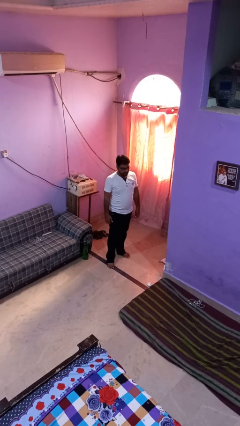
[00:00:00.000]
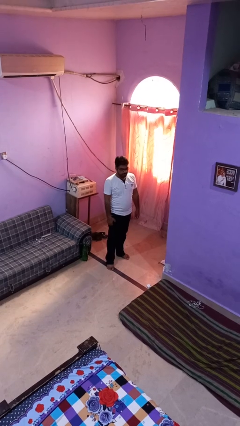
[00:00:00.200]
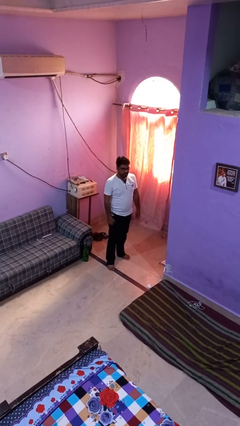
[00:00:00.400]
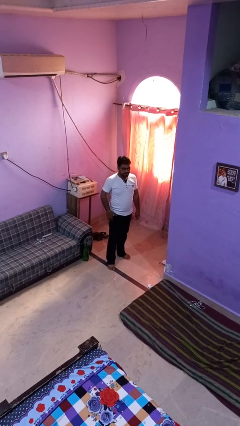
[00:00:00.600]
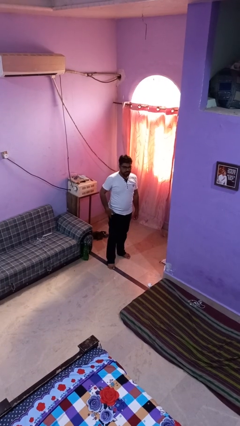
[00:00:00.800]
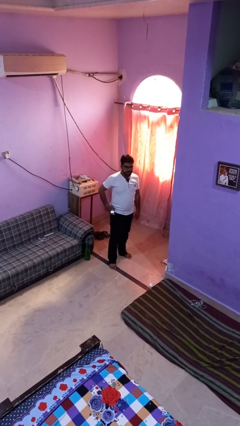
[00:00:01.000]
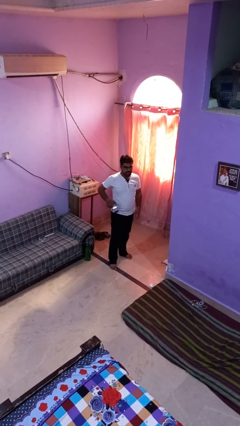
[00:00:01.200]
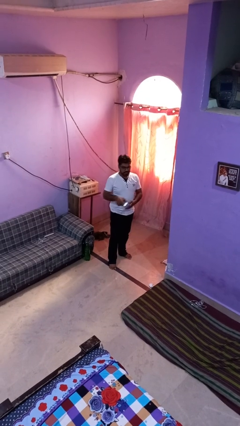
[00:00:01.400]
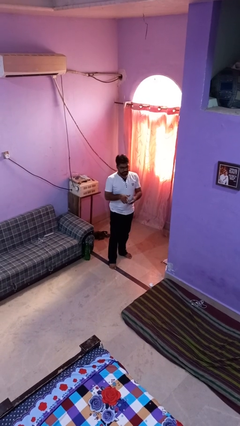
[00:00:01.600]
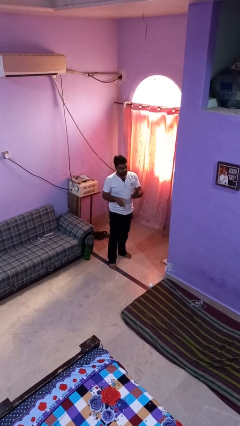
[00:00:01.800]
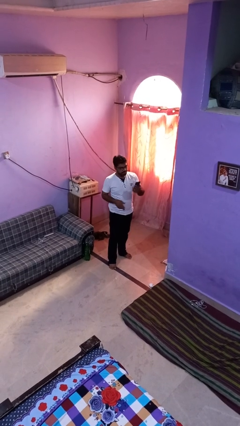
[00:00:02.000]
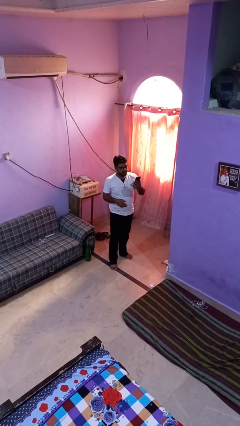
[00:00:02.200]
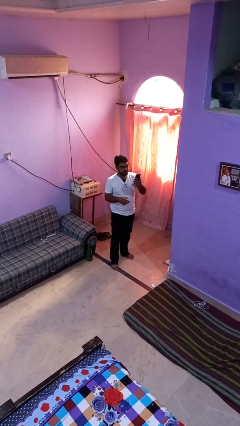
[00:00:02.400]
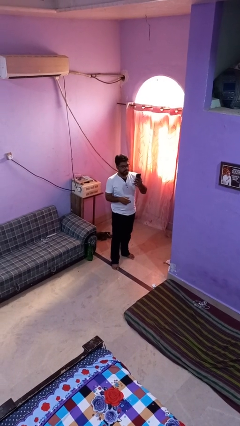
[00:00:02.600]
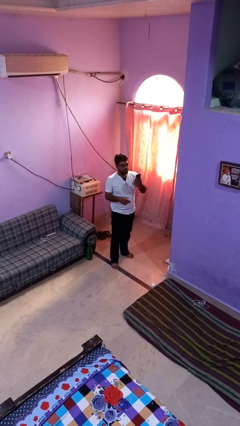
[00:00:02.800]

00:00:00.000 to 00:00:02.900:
person takes phone from pocket

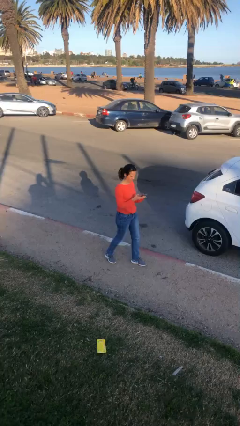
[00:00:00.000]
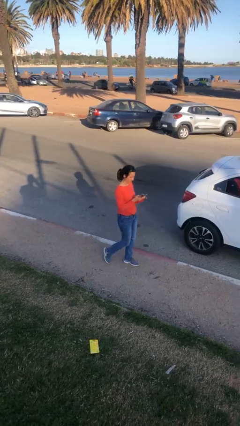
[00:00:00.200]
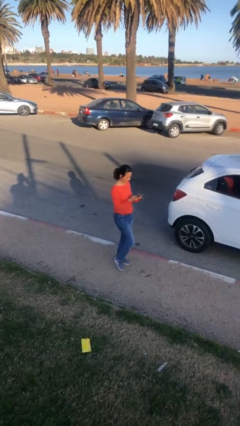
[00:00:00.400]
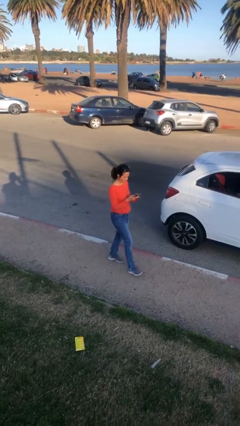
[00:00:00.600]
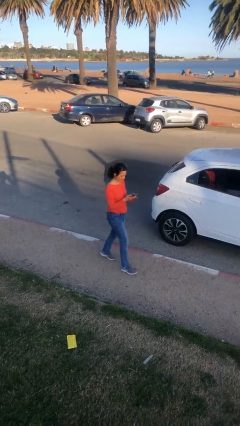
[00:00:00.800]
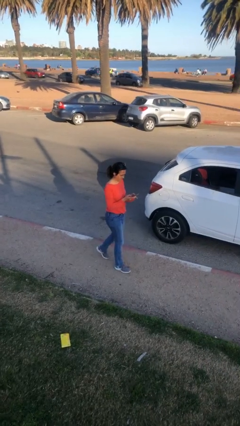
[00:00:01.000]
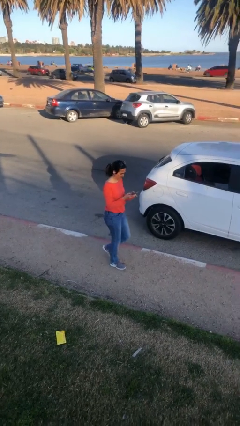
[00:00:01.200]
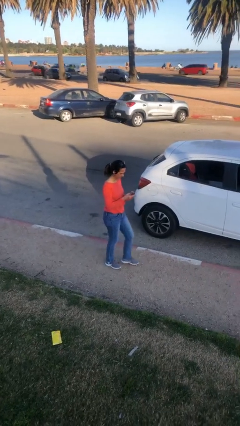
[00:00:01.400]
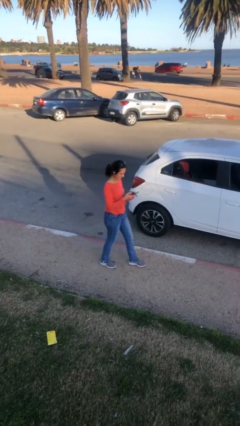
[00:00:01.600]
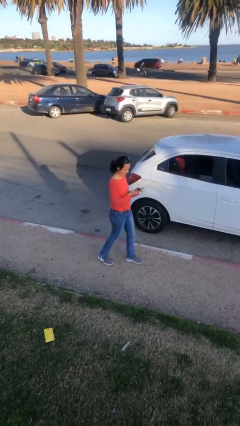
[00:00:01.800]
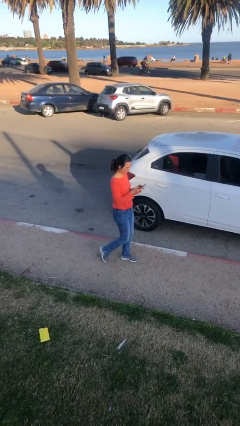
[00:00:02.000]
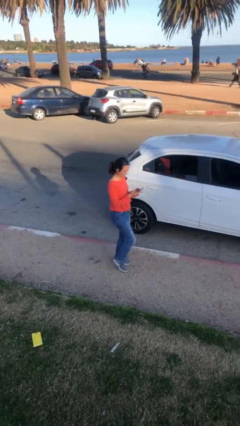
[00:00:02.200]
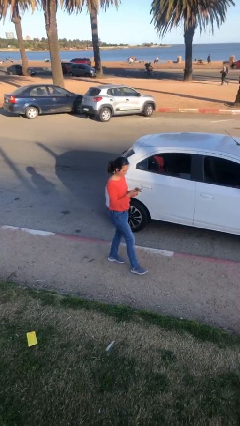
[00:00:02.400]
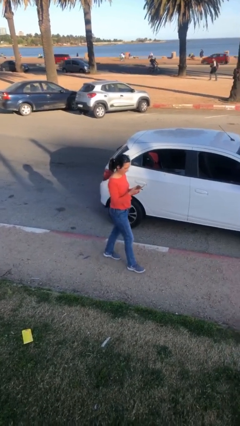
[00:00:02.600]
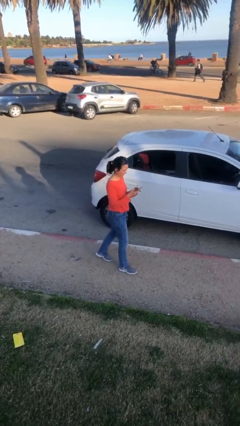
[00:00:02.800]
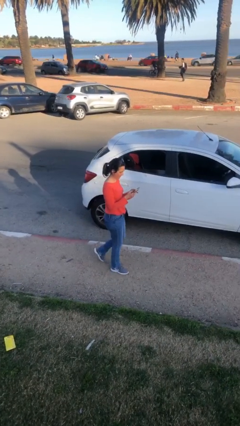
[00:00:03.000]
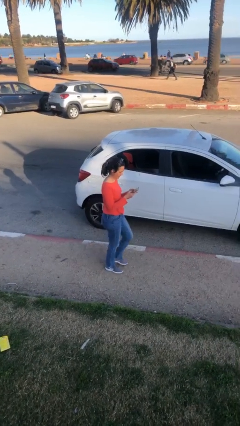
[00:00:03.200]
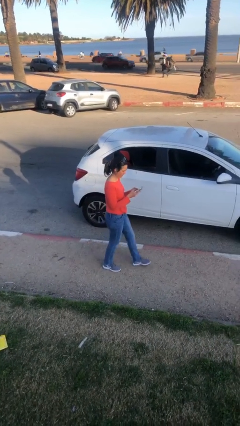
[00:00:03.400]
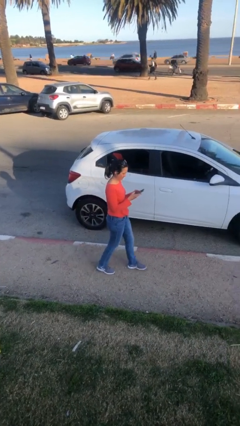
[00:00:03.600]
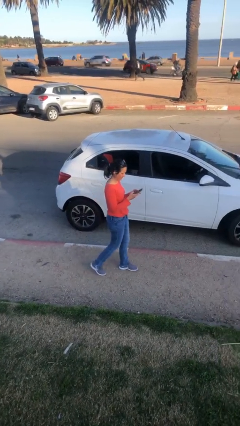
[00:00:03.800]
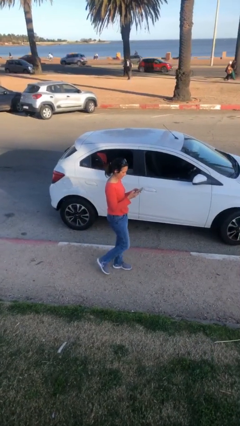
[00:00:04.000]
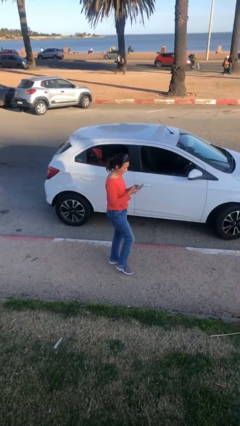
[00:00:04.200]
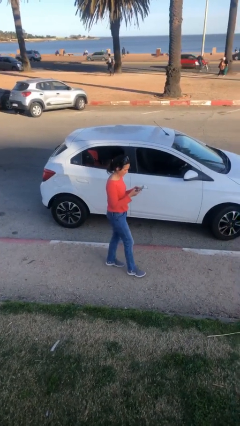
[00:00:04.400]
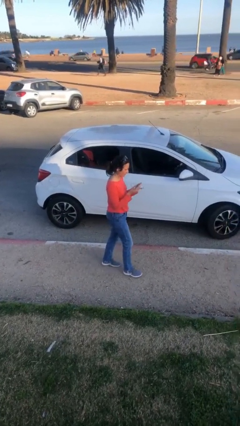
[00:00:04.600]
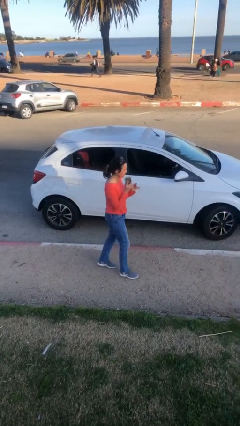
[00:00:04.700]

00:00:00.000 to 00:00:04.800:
person texts on phone

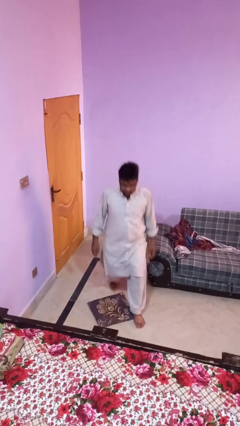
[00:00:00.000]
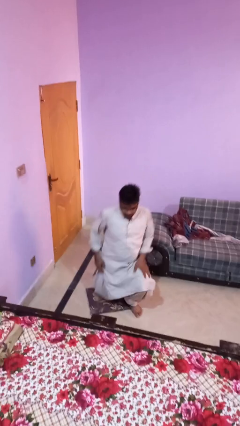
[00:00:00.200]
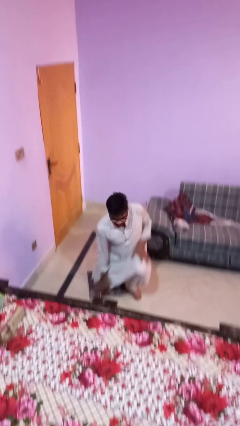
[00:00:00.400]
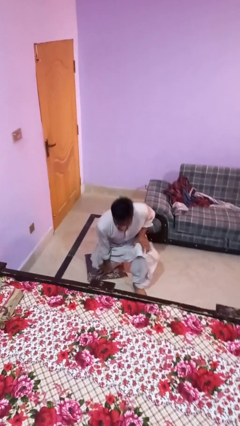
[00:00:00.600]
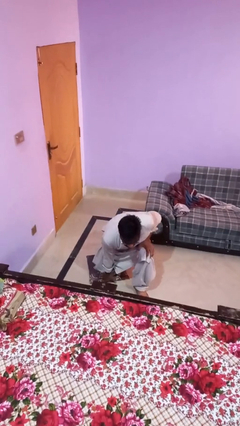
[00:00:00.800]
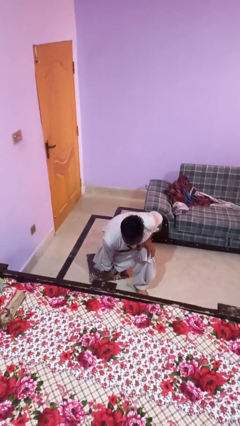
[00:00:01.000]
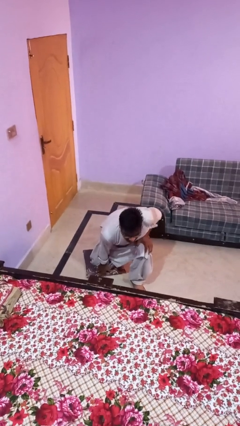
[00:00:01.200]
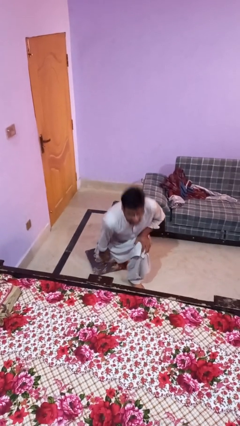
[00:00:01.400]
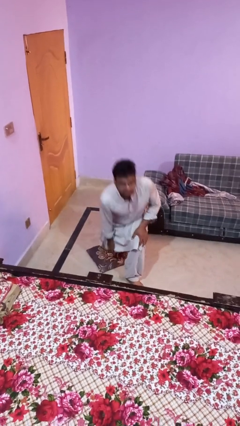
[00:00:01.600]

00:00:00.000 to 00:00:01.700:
person trips on object on floor

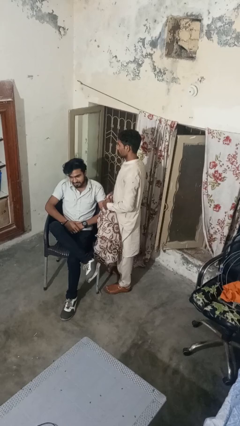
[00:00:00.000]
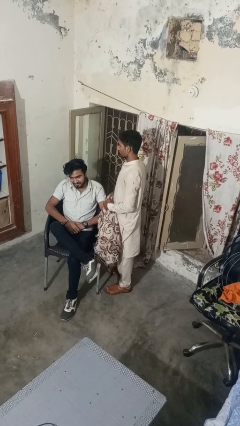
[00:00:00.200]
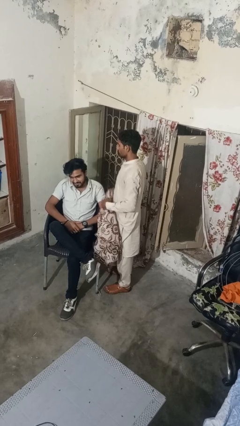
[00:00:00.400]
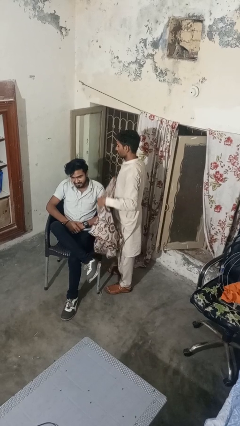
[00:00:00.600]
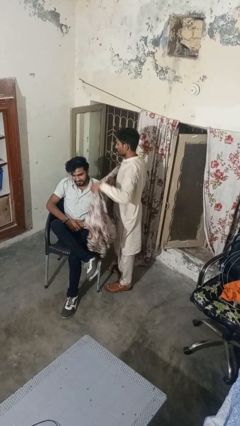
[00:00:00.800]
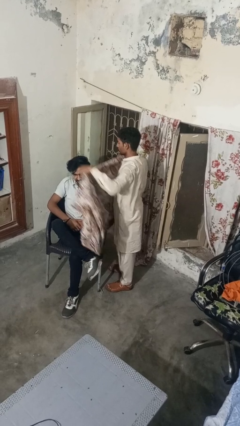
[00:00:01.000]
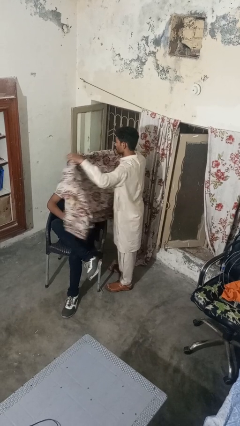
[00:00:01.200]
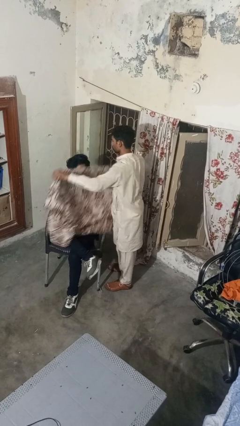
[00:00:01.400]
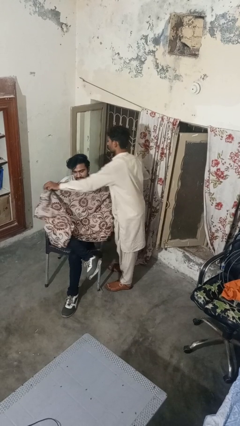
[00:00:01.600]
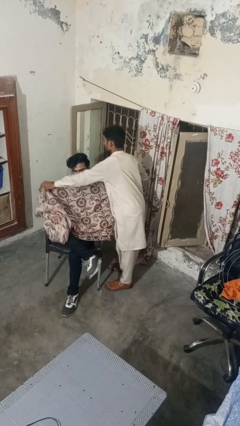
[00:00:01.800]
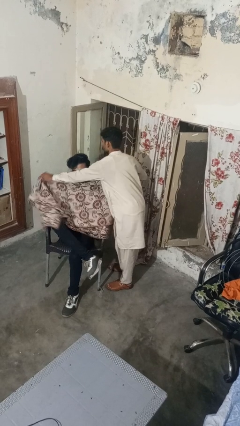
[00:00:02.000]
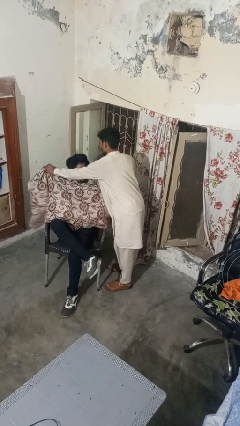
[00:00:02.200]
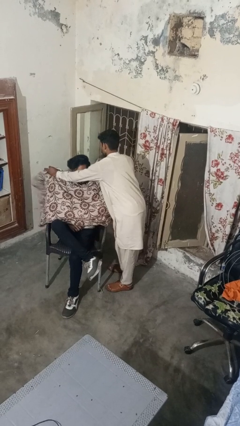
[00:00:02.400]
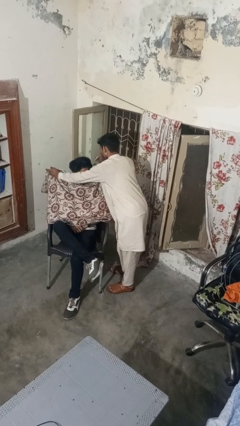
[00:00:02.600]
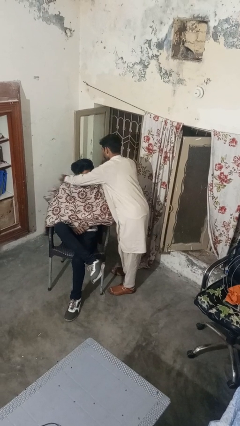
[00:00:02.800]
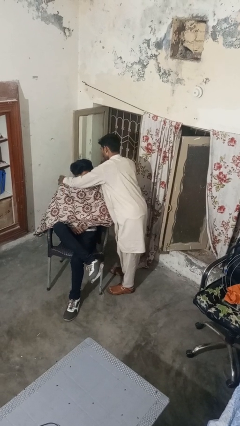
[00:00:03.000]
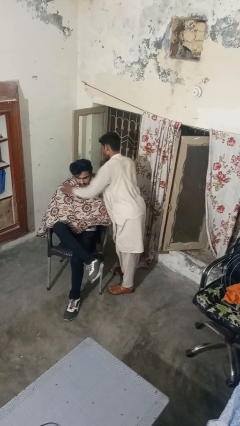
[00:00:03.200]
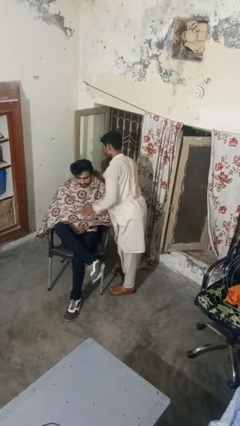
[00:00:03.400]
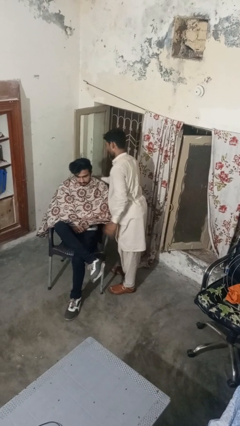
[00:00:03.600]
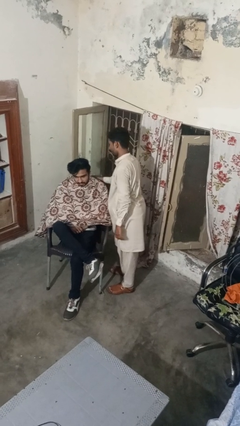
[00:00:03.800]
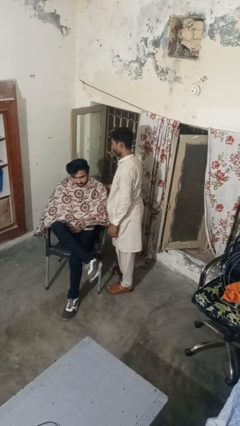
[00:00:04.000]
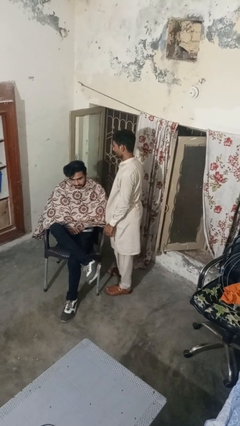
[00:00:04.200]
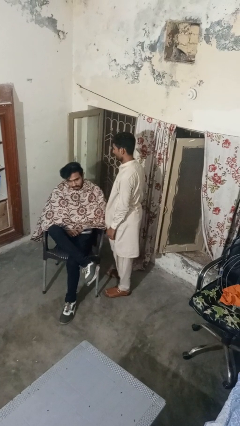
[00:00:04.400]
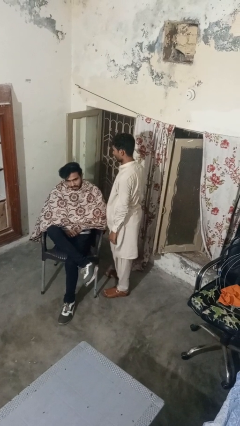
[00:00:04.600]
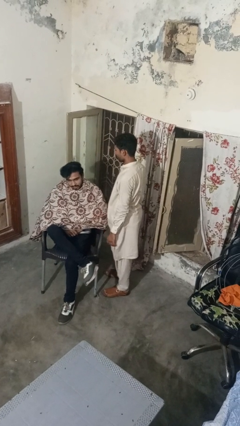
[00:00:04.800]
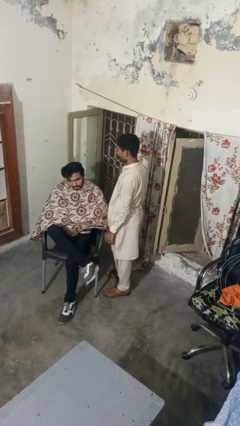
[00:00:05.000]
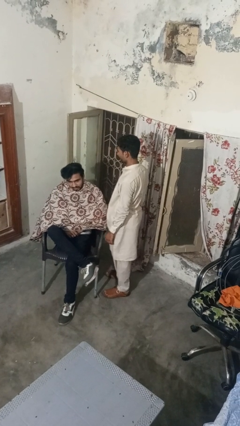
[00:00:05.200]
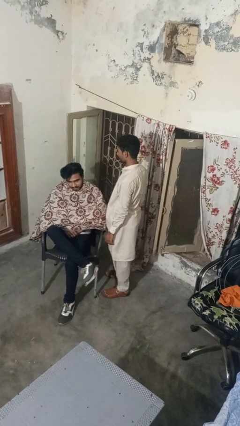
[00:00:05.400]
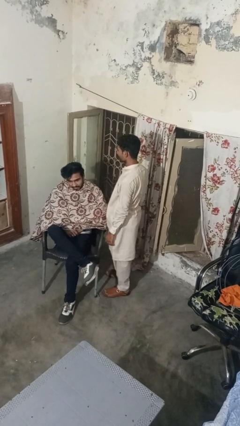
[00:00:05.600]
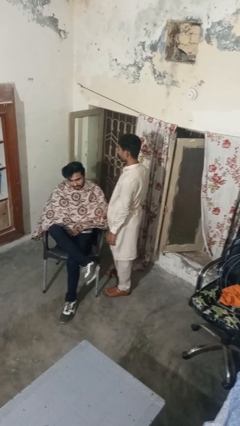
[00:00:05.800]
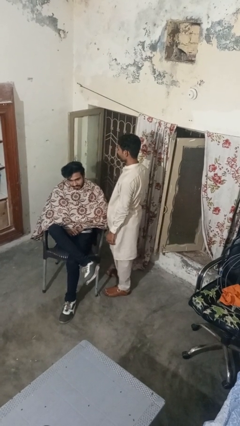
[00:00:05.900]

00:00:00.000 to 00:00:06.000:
person covers friend with blanket

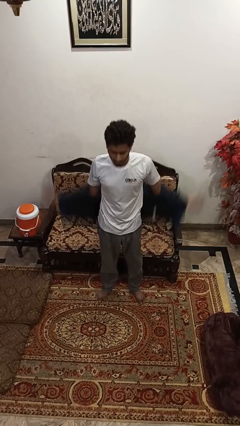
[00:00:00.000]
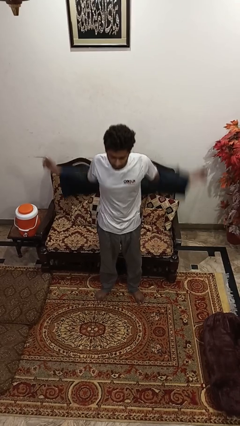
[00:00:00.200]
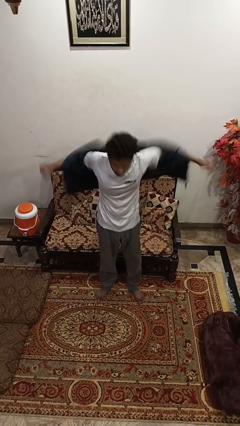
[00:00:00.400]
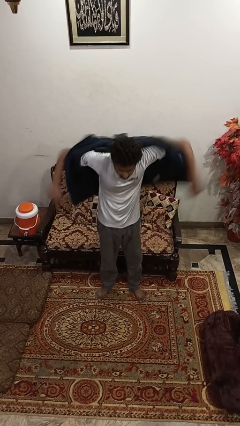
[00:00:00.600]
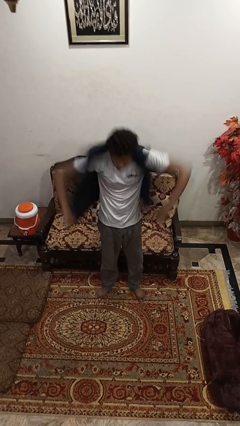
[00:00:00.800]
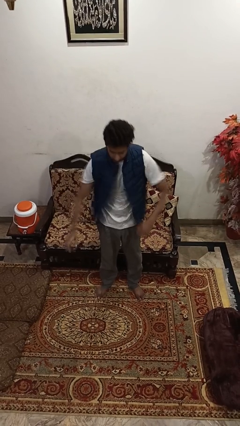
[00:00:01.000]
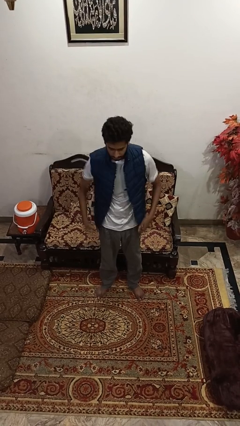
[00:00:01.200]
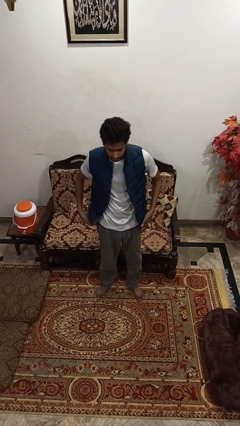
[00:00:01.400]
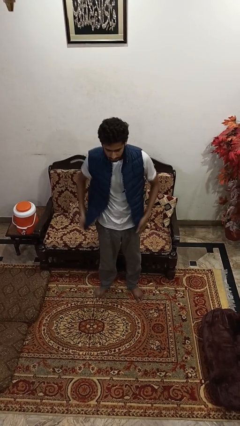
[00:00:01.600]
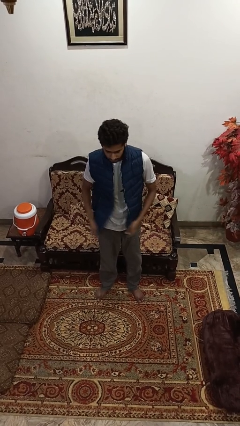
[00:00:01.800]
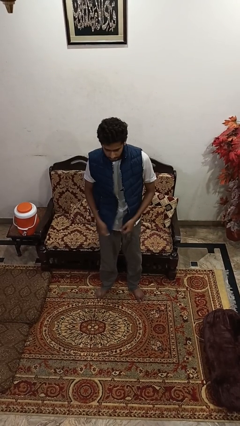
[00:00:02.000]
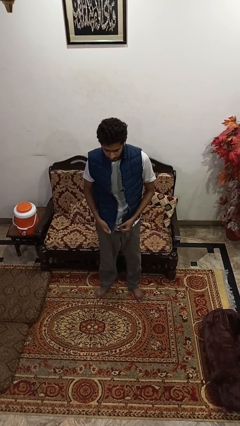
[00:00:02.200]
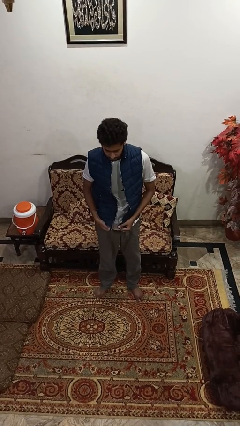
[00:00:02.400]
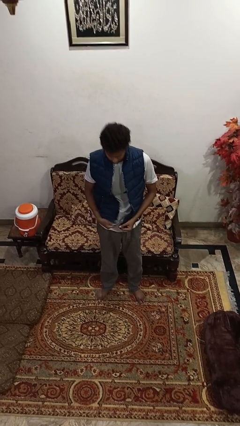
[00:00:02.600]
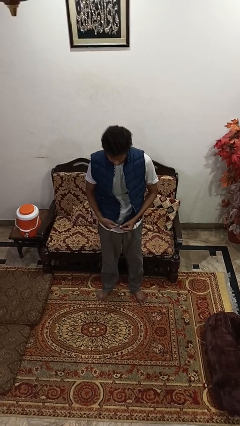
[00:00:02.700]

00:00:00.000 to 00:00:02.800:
person puts on jacket
